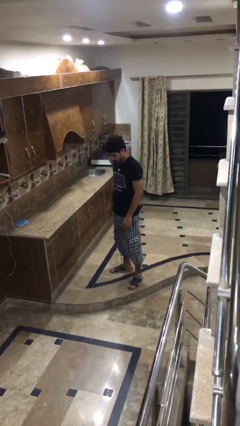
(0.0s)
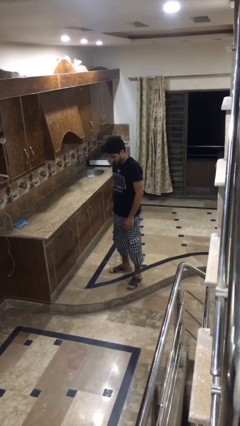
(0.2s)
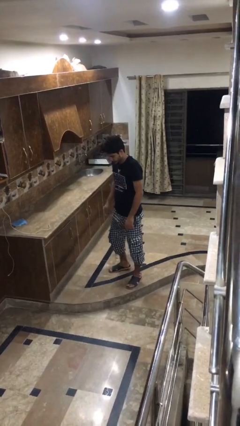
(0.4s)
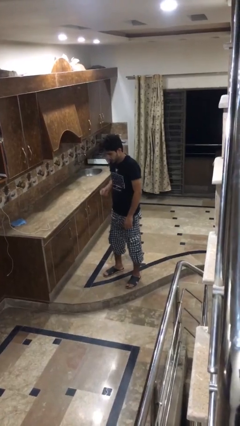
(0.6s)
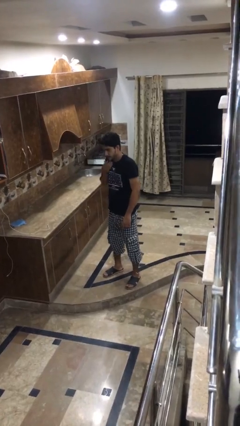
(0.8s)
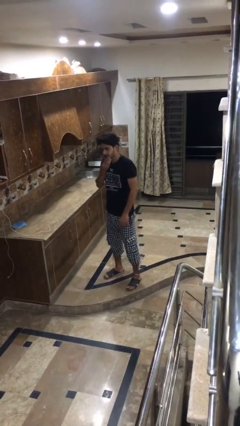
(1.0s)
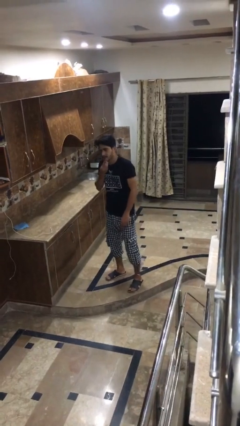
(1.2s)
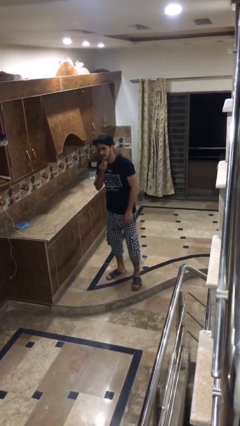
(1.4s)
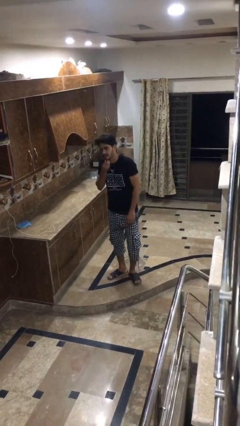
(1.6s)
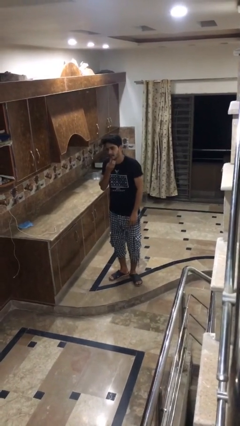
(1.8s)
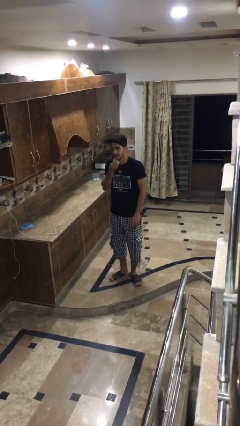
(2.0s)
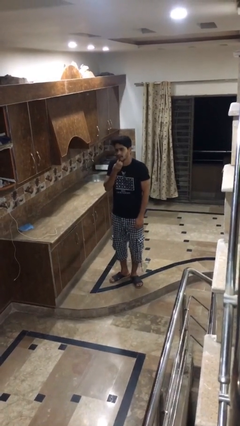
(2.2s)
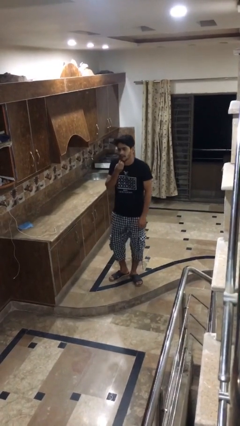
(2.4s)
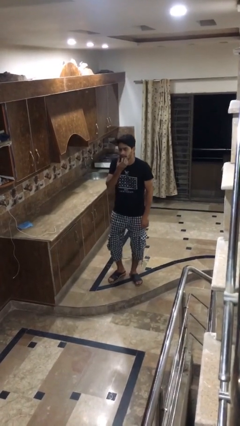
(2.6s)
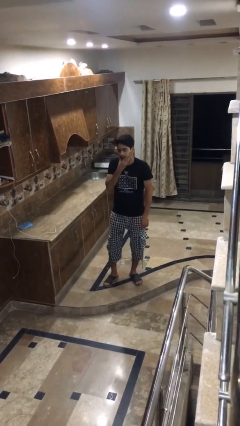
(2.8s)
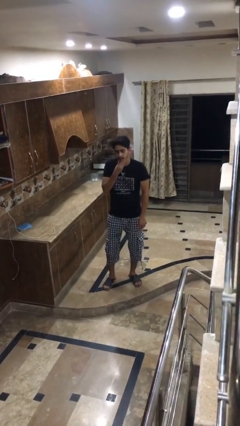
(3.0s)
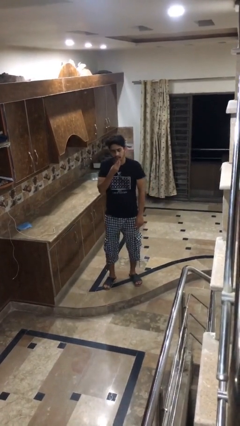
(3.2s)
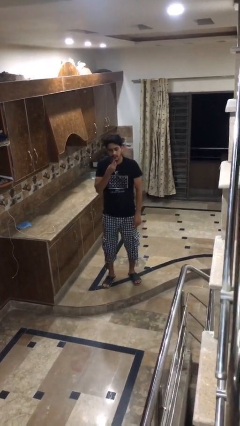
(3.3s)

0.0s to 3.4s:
person strokes chin

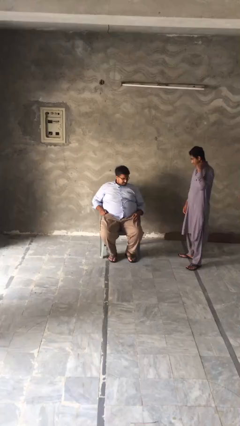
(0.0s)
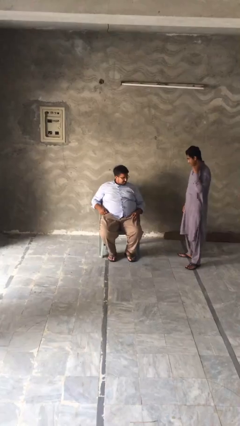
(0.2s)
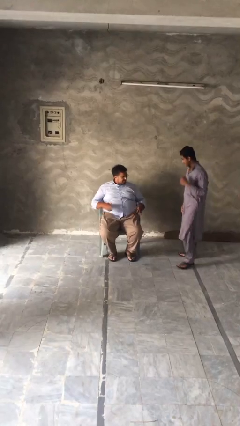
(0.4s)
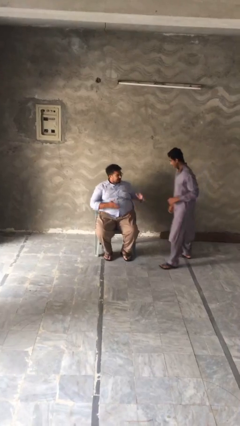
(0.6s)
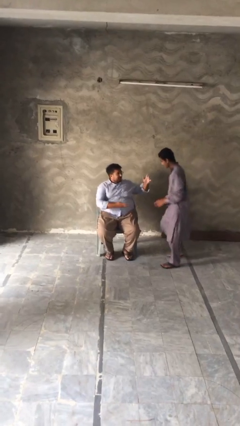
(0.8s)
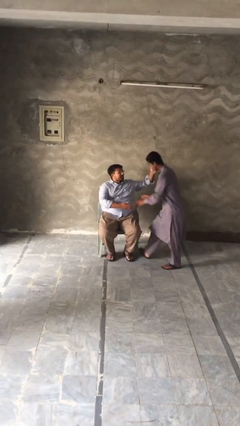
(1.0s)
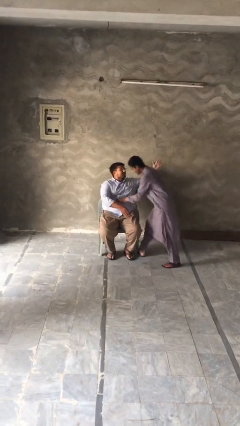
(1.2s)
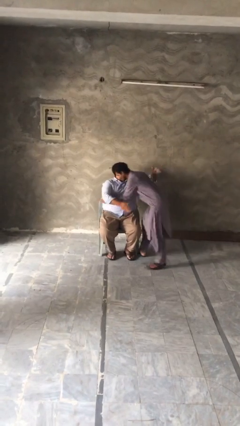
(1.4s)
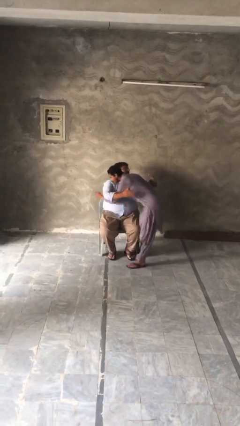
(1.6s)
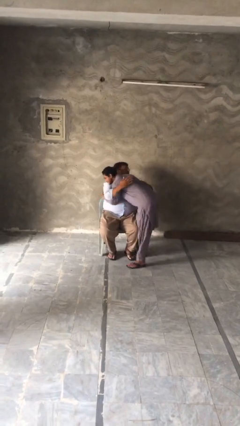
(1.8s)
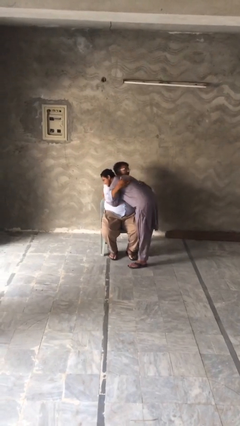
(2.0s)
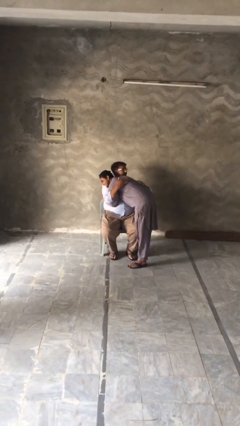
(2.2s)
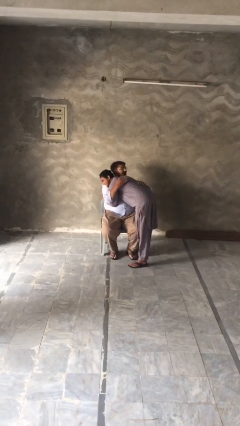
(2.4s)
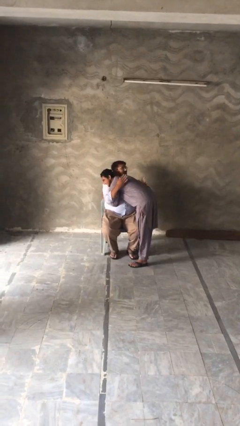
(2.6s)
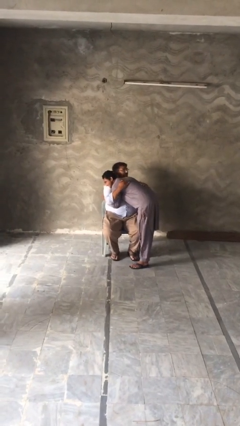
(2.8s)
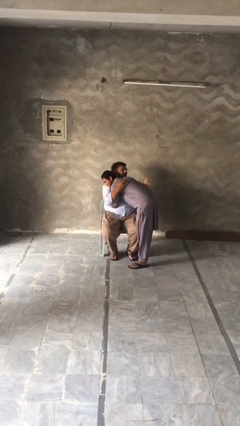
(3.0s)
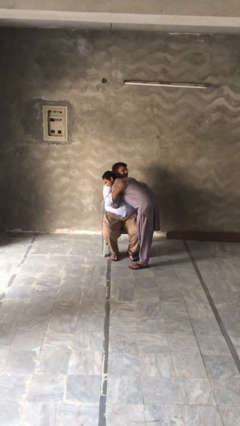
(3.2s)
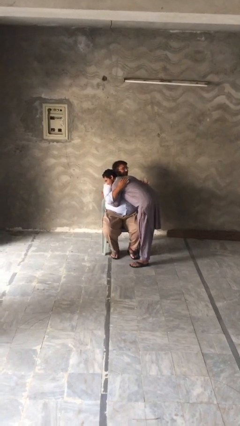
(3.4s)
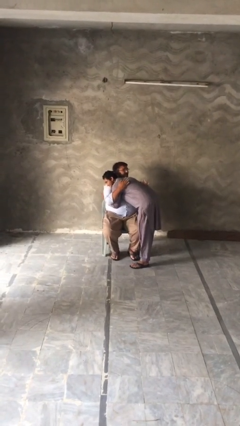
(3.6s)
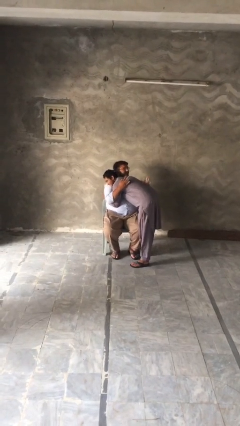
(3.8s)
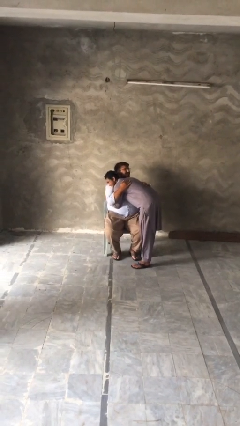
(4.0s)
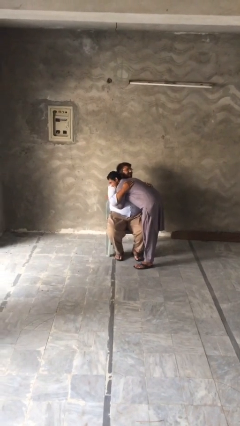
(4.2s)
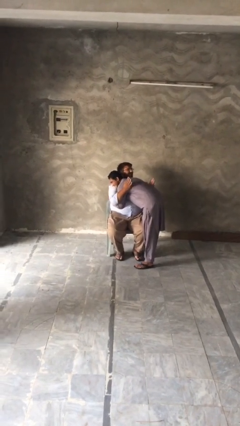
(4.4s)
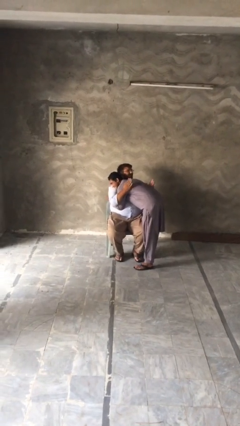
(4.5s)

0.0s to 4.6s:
person embraces person

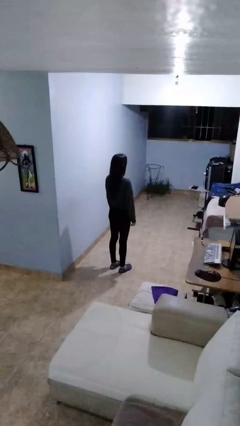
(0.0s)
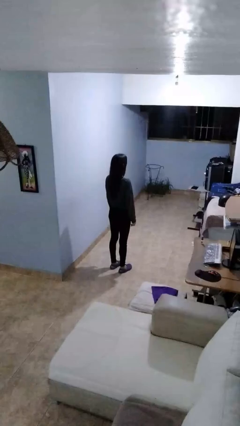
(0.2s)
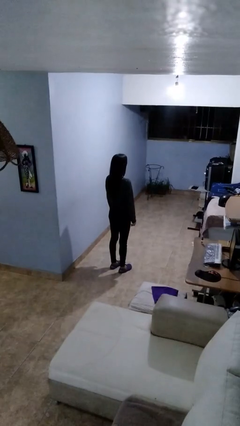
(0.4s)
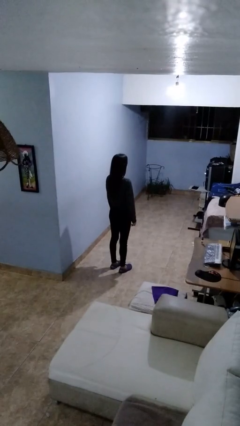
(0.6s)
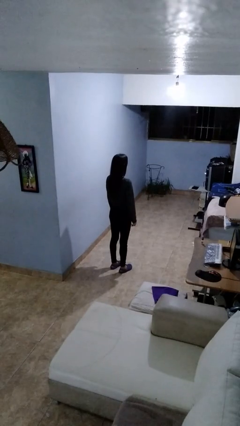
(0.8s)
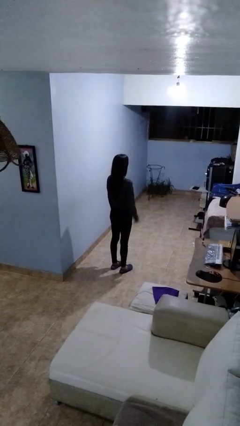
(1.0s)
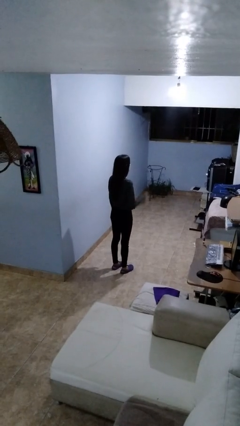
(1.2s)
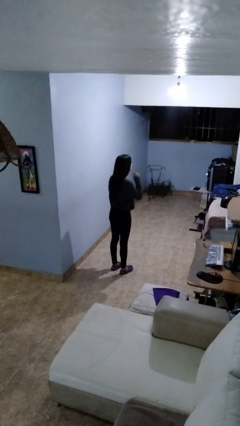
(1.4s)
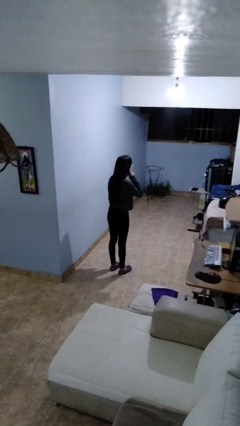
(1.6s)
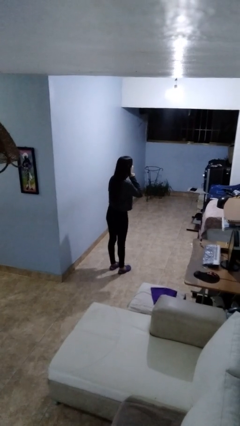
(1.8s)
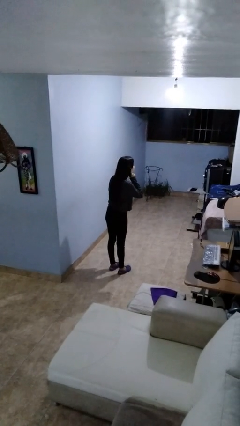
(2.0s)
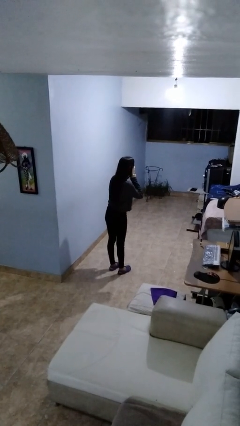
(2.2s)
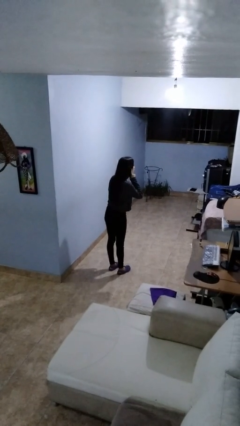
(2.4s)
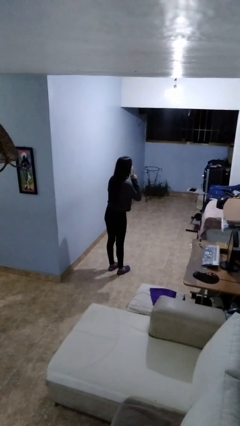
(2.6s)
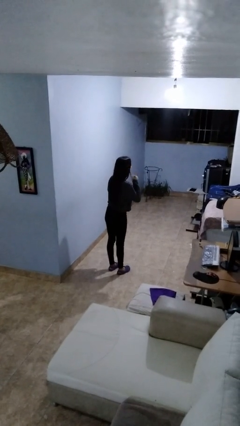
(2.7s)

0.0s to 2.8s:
person gestures listen closely

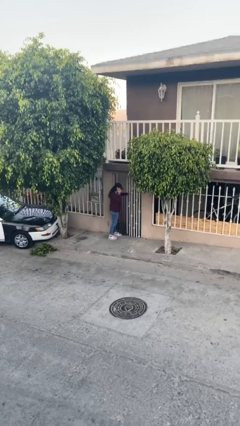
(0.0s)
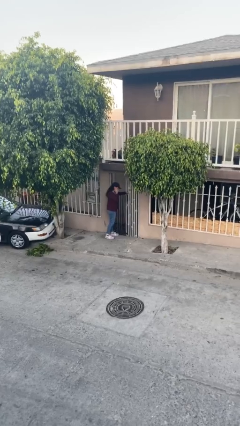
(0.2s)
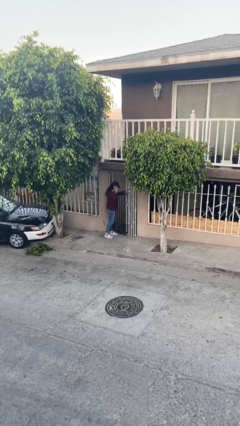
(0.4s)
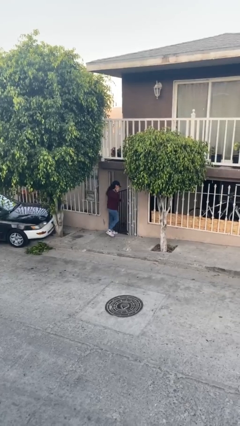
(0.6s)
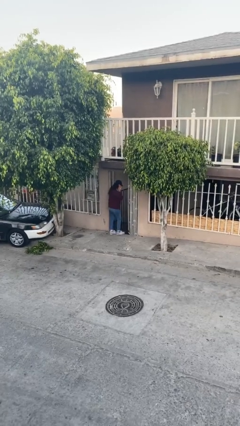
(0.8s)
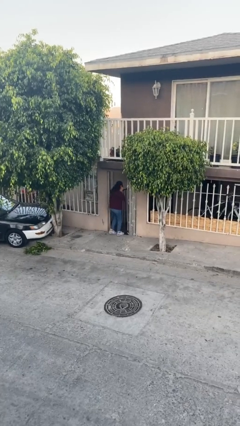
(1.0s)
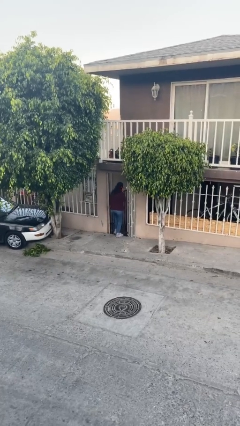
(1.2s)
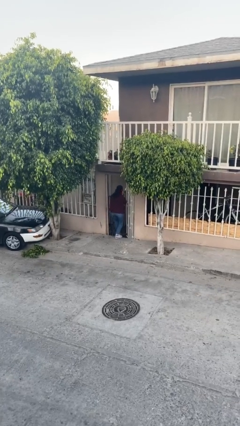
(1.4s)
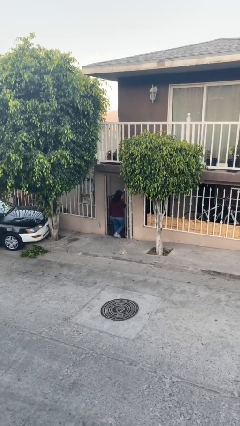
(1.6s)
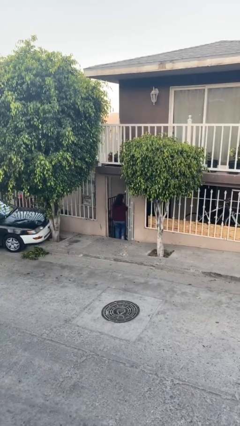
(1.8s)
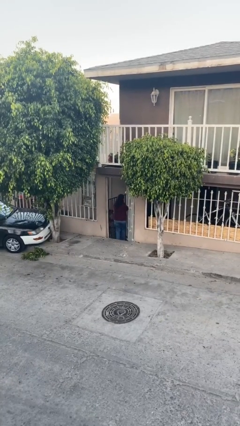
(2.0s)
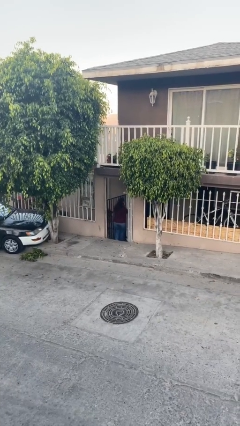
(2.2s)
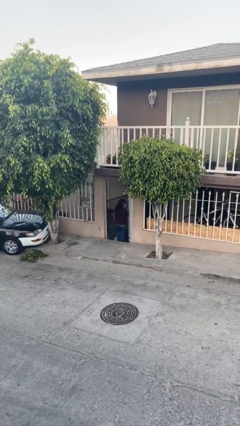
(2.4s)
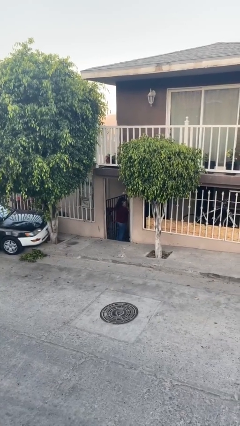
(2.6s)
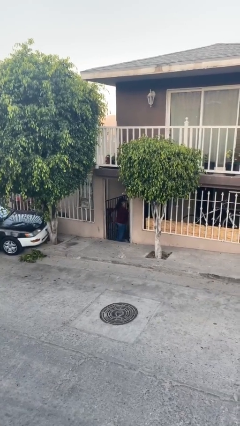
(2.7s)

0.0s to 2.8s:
person exits scene through structure

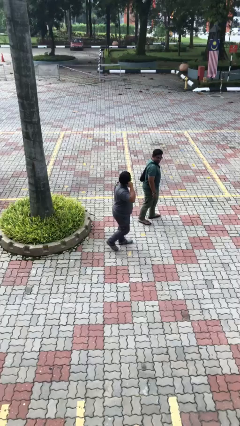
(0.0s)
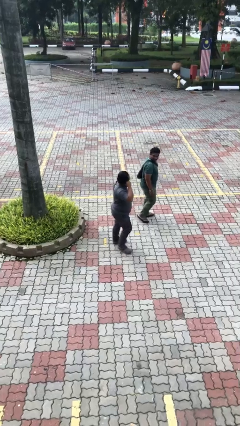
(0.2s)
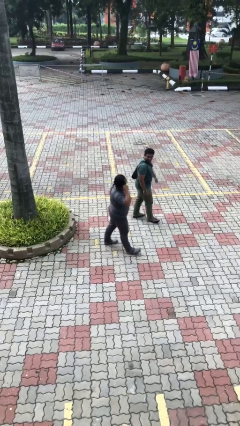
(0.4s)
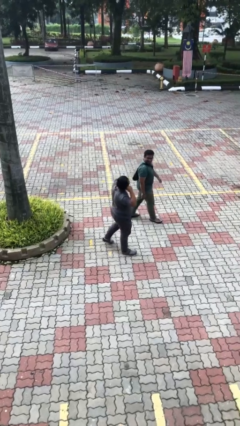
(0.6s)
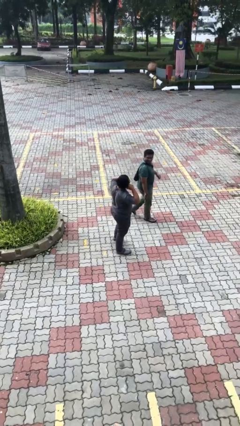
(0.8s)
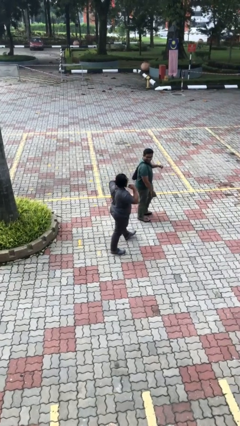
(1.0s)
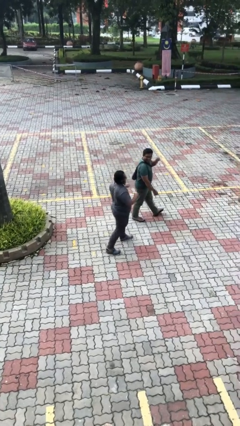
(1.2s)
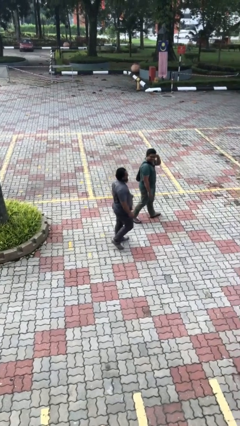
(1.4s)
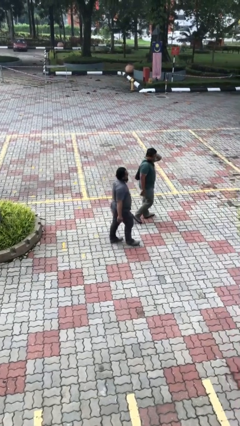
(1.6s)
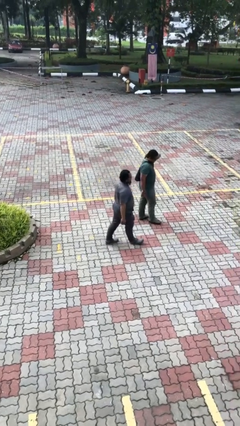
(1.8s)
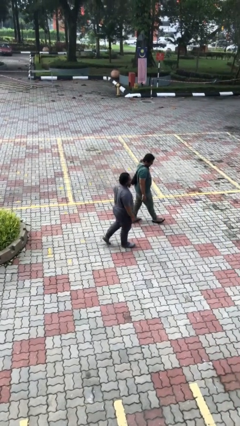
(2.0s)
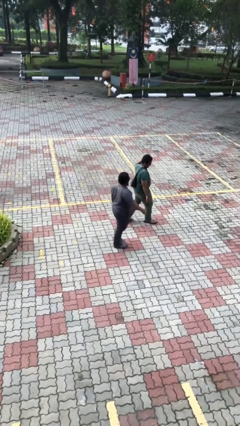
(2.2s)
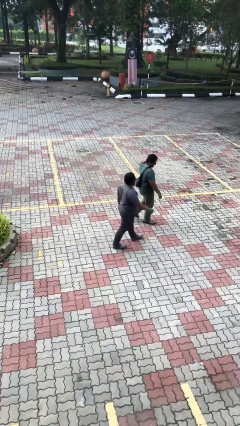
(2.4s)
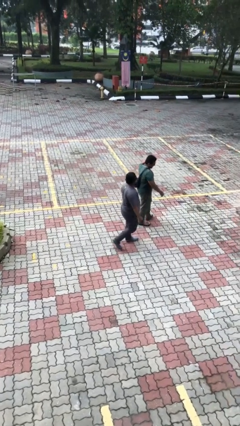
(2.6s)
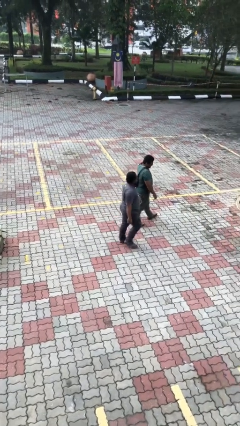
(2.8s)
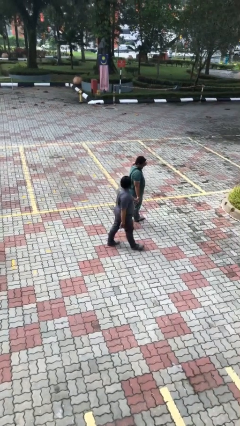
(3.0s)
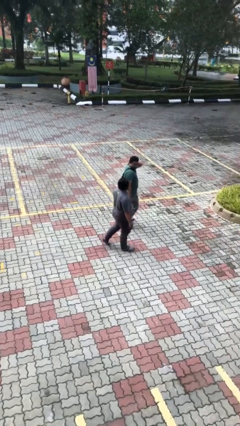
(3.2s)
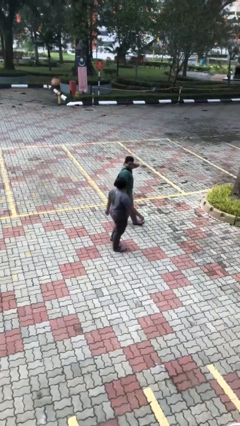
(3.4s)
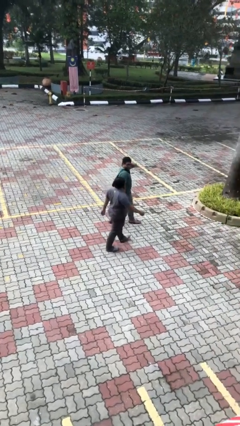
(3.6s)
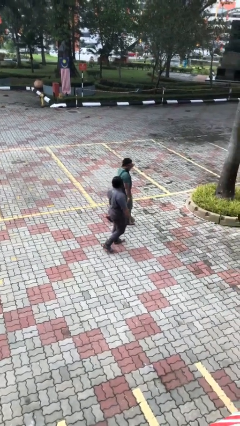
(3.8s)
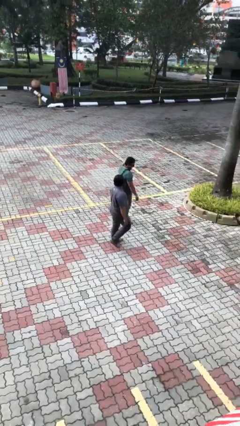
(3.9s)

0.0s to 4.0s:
person talks to person
